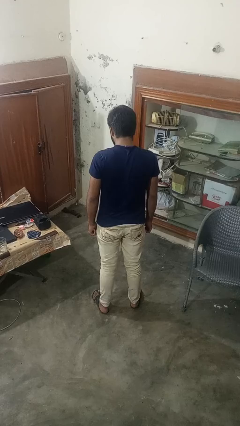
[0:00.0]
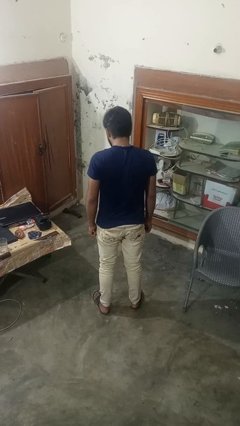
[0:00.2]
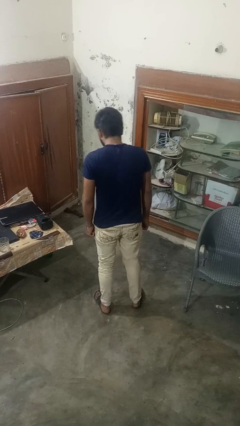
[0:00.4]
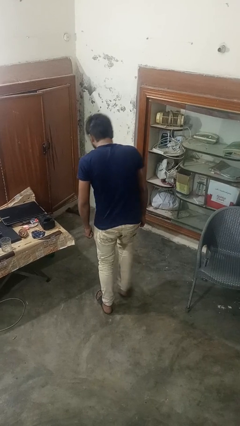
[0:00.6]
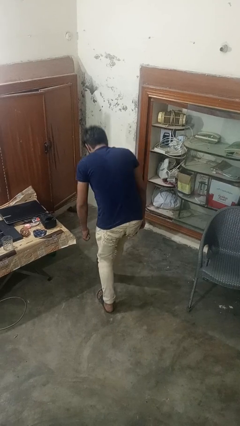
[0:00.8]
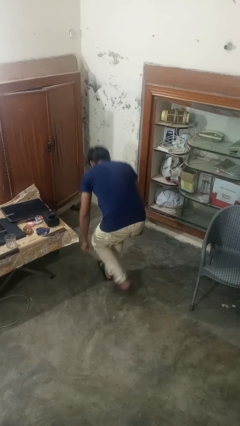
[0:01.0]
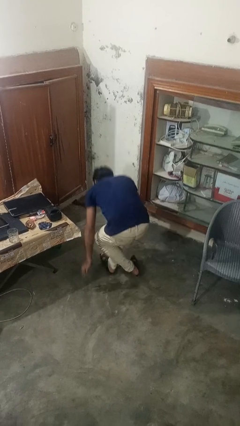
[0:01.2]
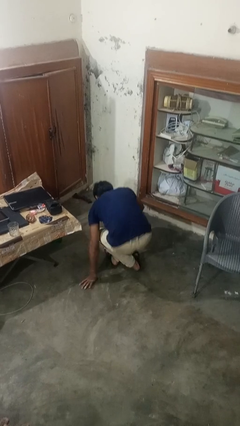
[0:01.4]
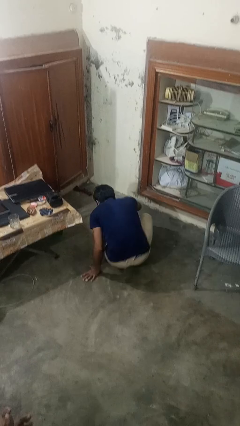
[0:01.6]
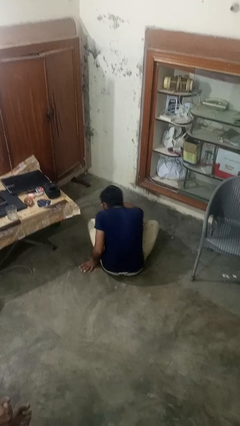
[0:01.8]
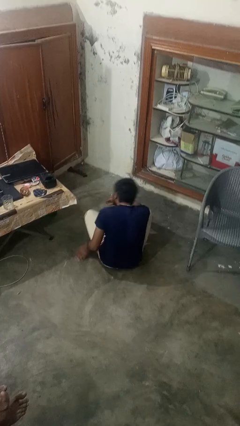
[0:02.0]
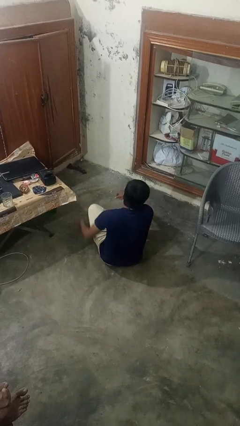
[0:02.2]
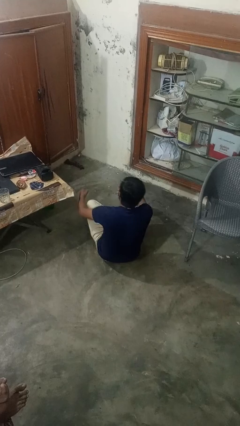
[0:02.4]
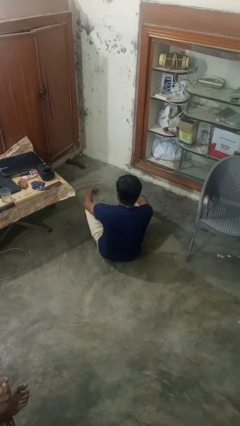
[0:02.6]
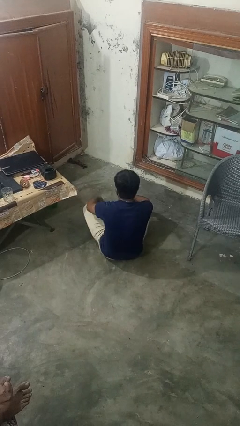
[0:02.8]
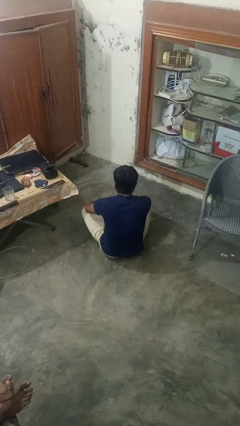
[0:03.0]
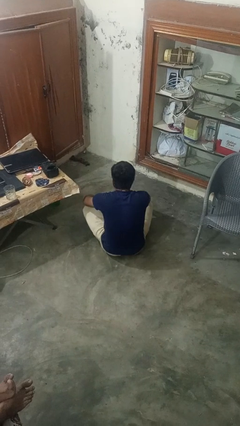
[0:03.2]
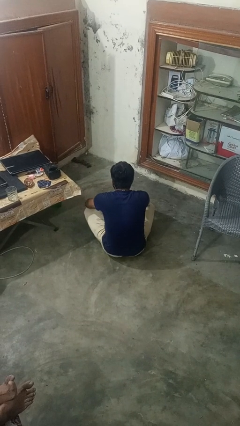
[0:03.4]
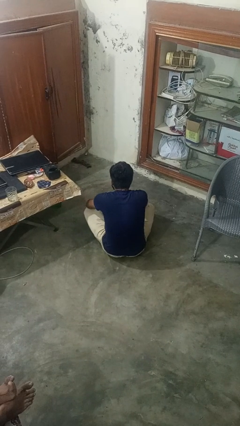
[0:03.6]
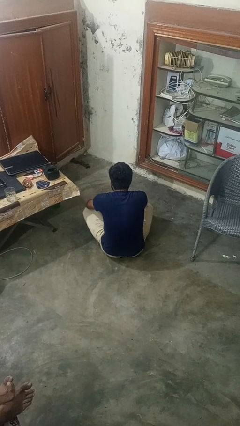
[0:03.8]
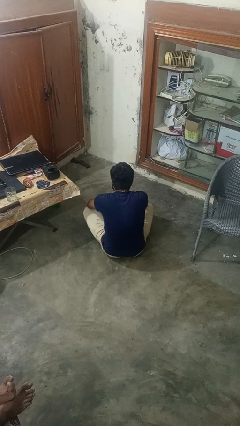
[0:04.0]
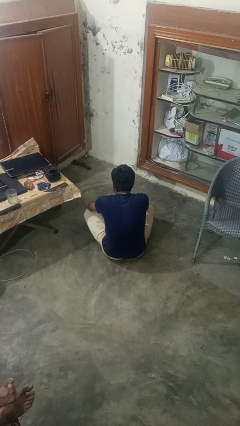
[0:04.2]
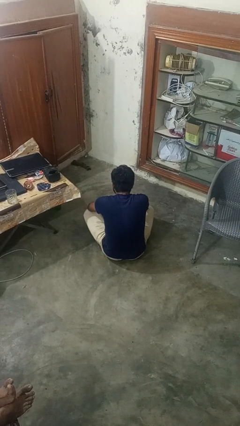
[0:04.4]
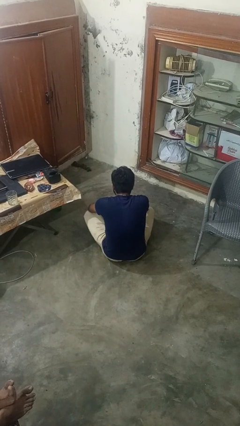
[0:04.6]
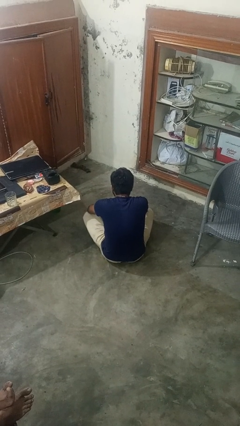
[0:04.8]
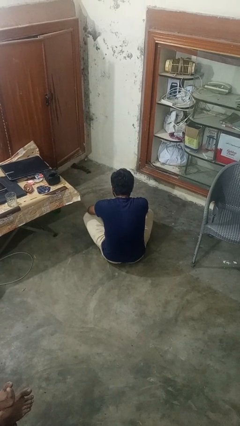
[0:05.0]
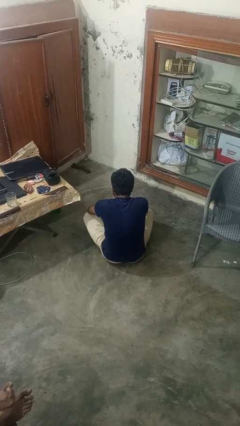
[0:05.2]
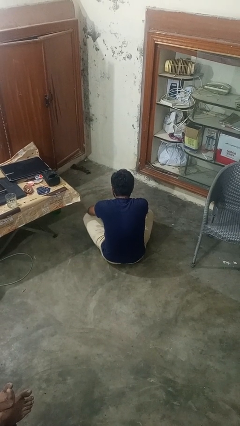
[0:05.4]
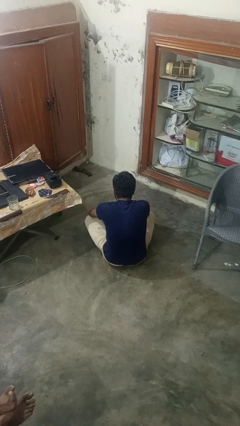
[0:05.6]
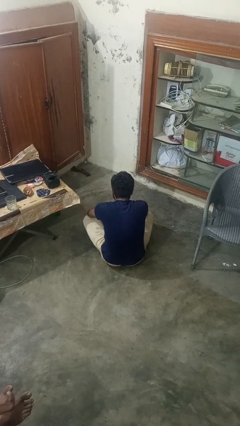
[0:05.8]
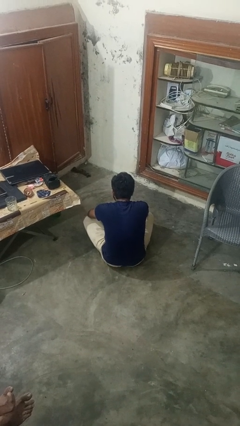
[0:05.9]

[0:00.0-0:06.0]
person sits crisscross

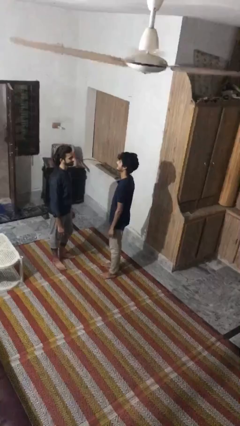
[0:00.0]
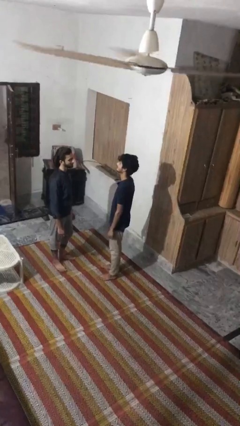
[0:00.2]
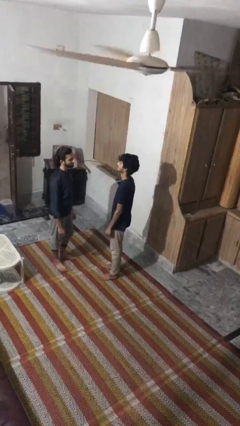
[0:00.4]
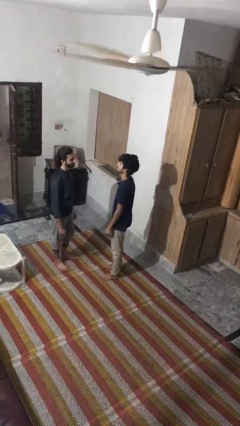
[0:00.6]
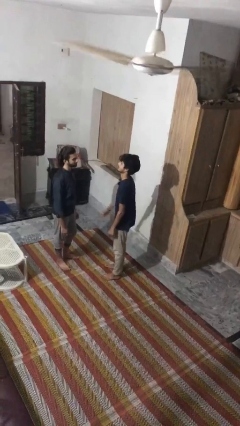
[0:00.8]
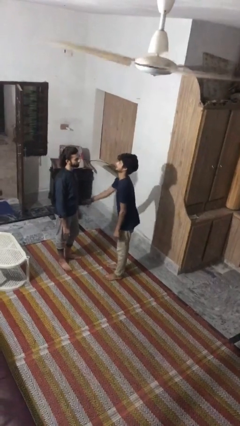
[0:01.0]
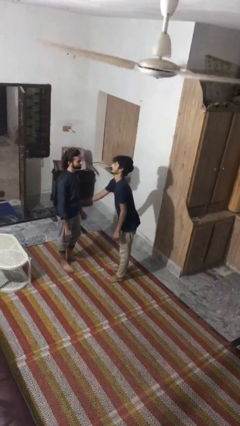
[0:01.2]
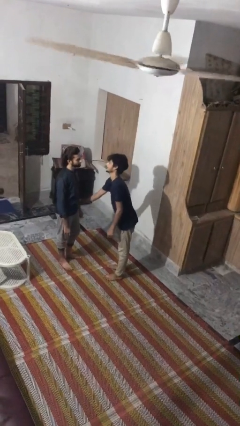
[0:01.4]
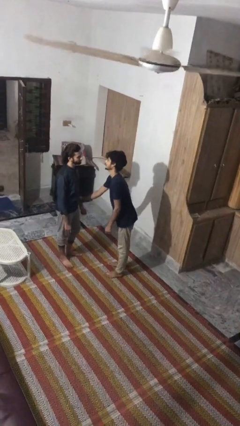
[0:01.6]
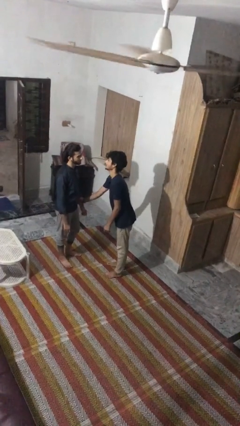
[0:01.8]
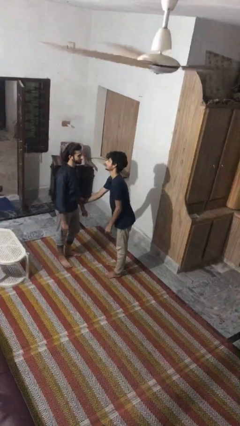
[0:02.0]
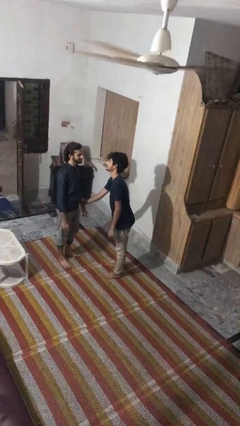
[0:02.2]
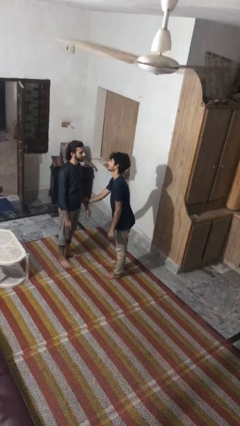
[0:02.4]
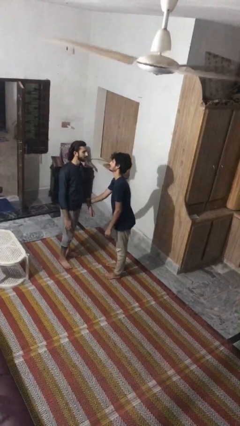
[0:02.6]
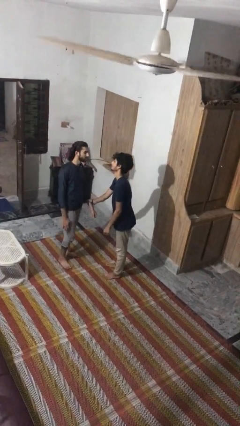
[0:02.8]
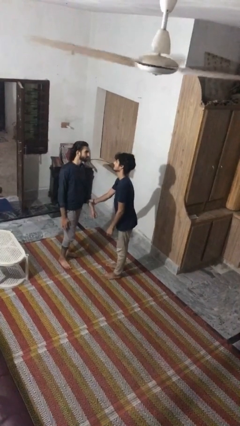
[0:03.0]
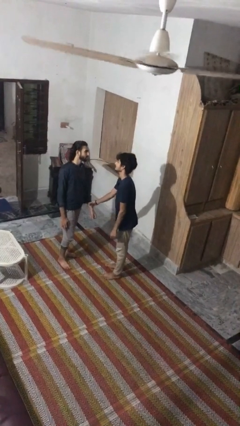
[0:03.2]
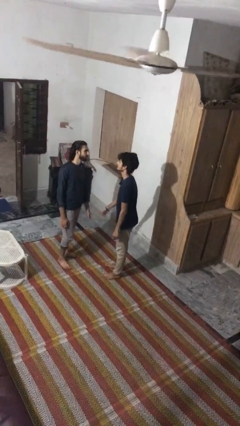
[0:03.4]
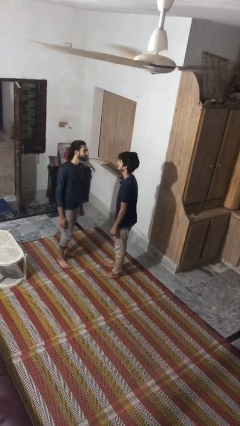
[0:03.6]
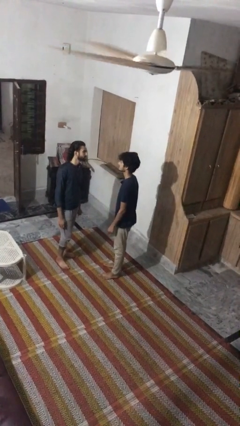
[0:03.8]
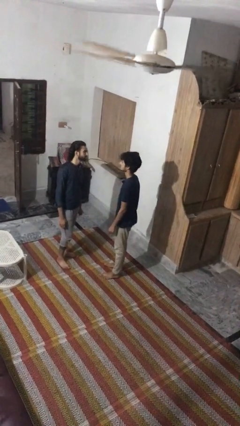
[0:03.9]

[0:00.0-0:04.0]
person grabs person by forearm

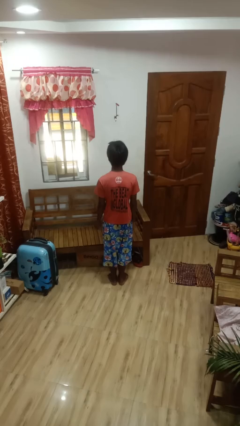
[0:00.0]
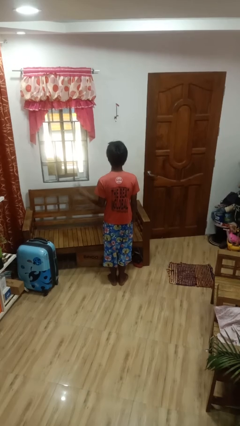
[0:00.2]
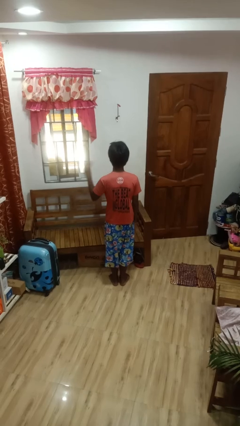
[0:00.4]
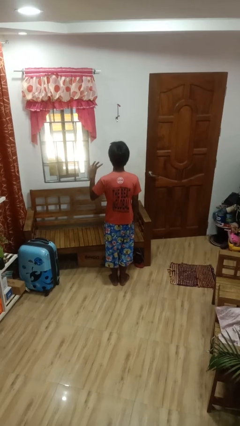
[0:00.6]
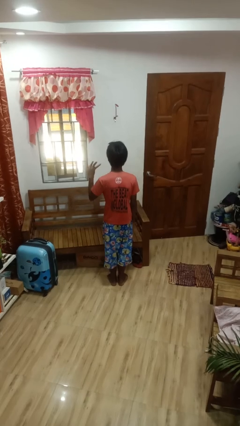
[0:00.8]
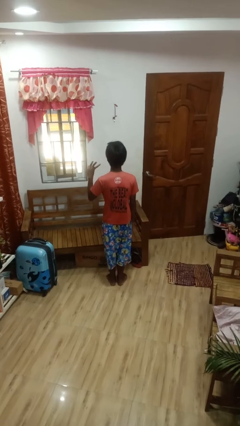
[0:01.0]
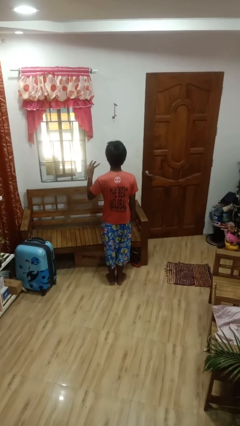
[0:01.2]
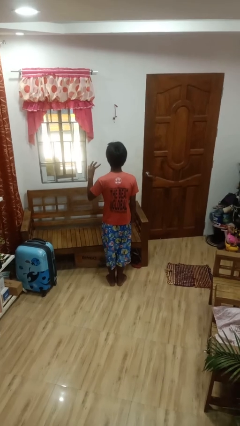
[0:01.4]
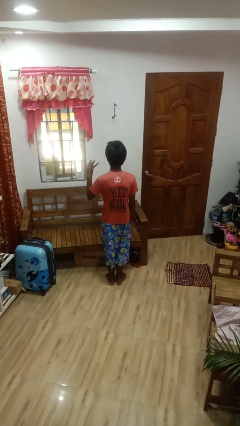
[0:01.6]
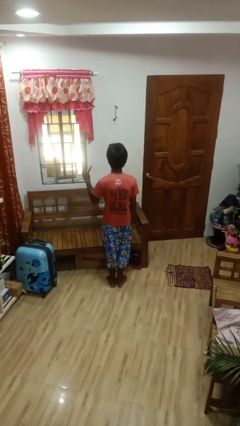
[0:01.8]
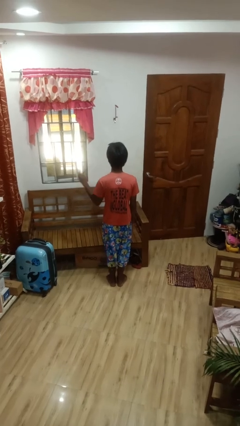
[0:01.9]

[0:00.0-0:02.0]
person gestures number three

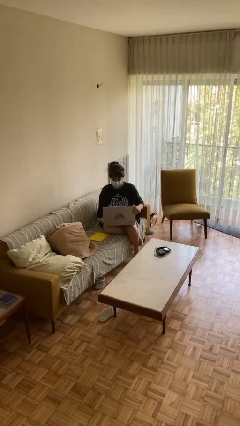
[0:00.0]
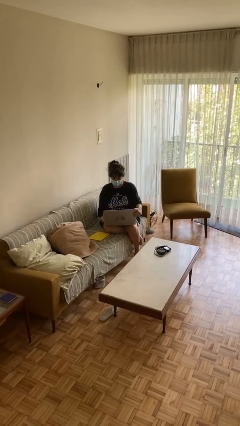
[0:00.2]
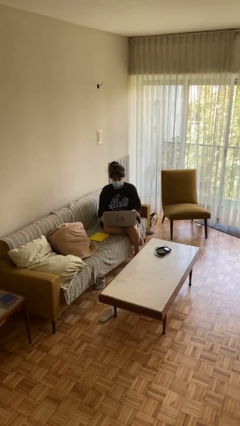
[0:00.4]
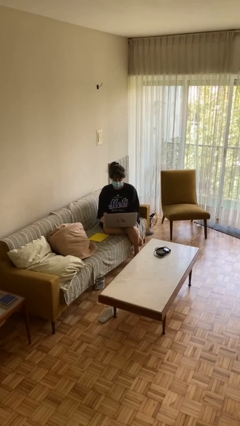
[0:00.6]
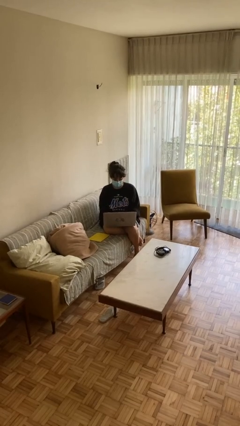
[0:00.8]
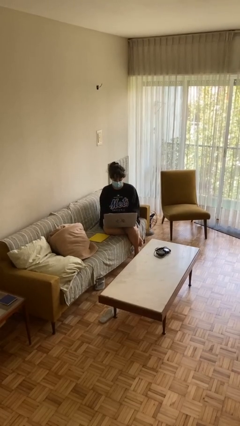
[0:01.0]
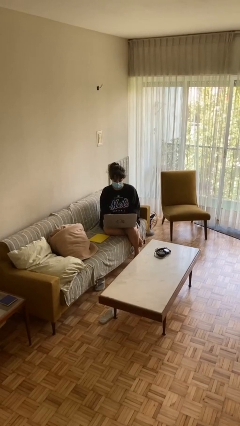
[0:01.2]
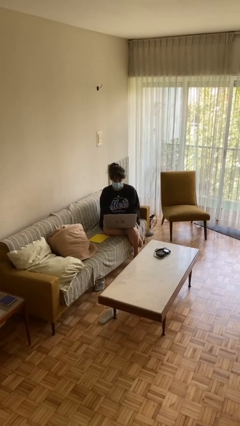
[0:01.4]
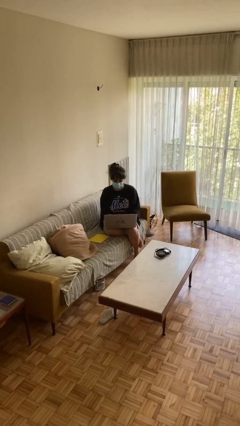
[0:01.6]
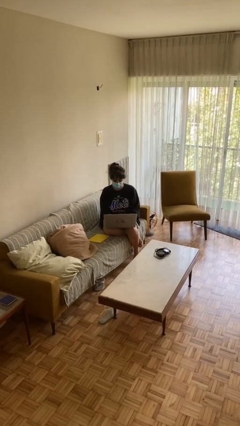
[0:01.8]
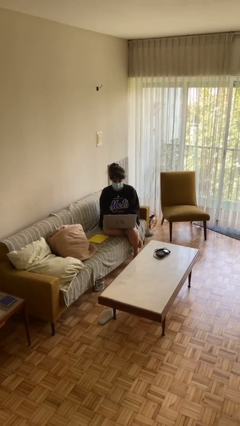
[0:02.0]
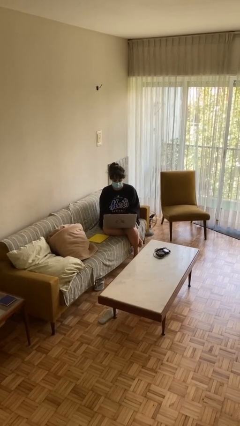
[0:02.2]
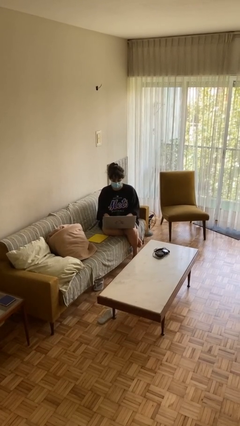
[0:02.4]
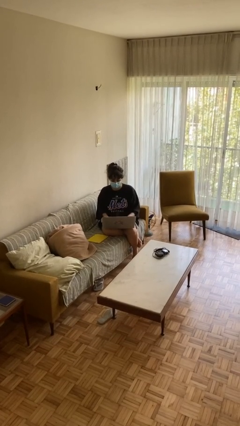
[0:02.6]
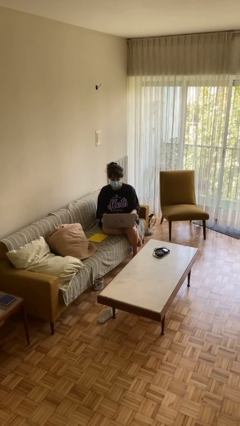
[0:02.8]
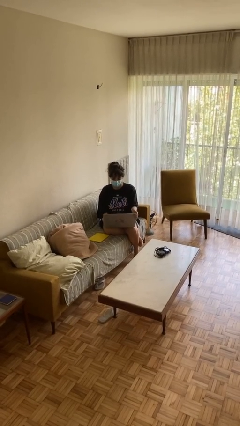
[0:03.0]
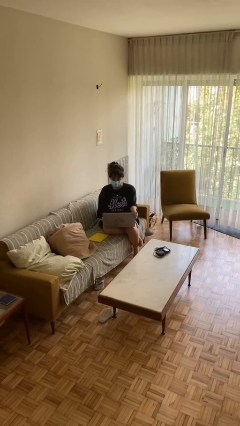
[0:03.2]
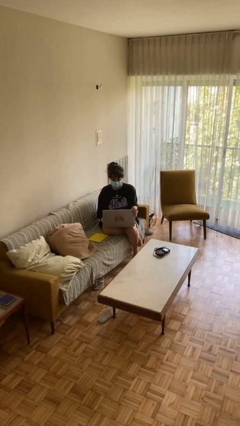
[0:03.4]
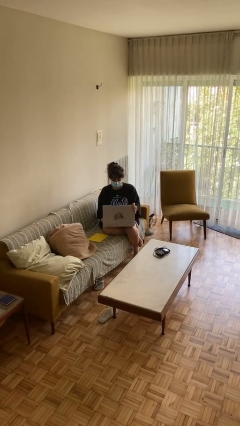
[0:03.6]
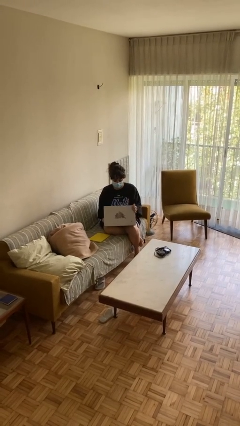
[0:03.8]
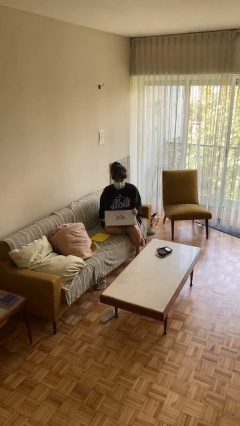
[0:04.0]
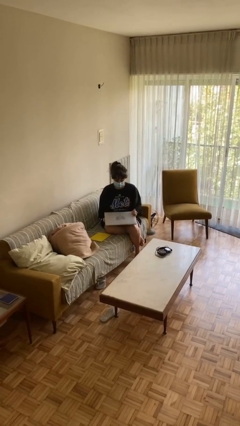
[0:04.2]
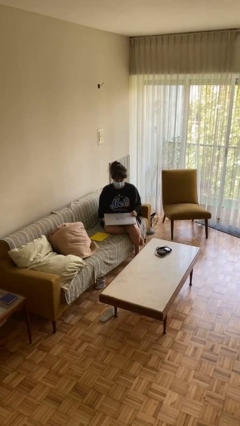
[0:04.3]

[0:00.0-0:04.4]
person interacts with laptop

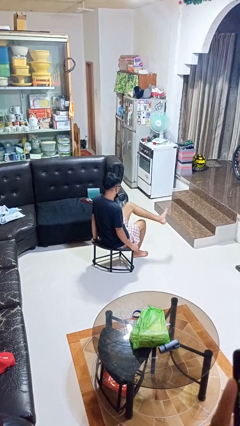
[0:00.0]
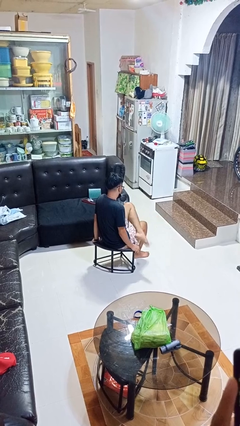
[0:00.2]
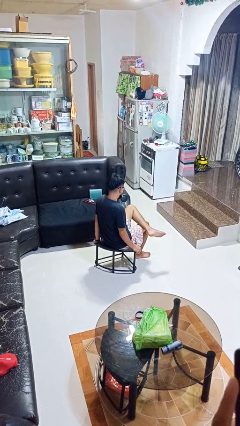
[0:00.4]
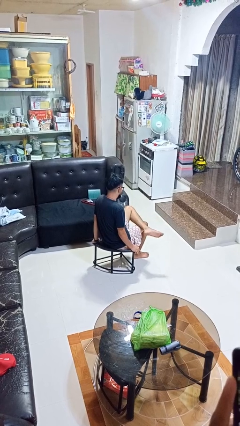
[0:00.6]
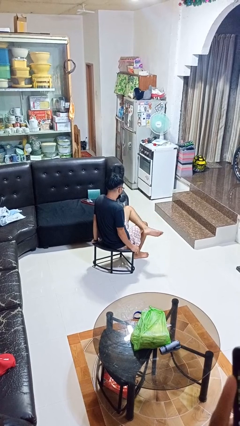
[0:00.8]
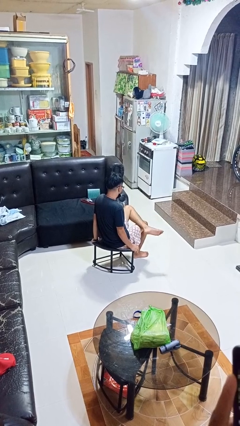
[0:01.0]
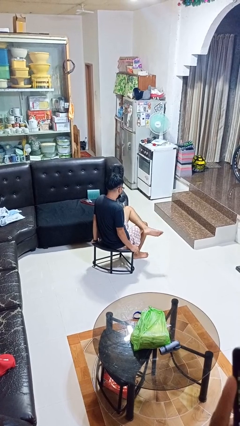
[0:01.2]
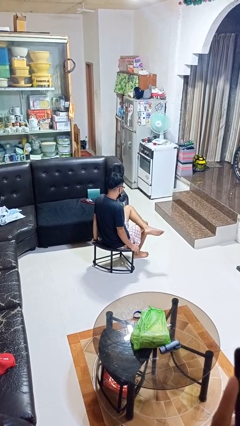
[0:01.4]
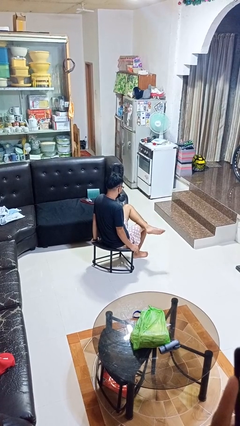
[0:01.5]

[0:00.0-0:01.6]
person crosses legs
